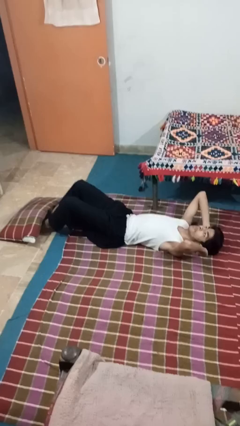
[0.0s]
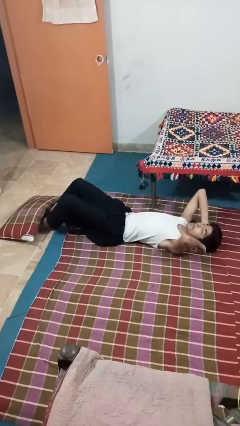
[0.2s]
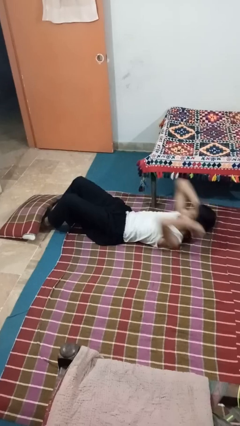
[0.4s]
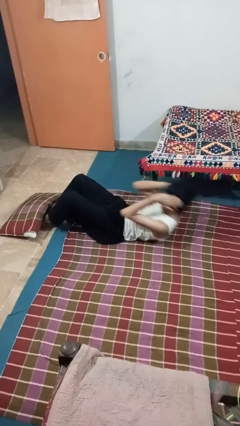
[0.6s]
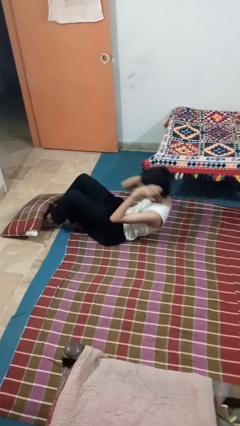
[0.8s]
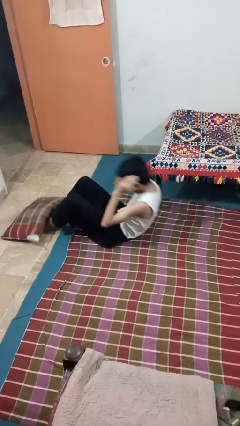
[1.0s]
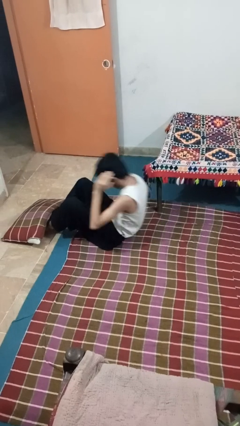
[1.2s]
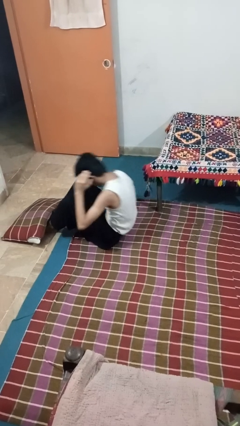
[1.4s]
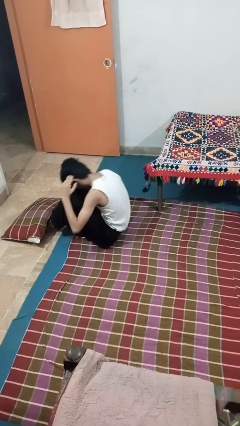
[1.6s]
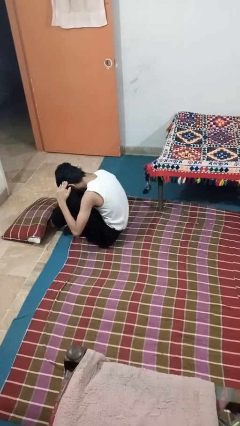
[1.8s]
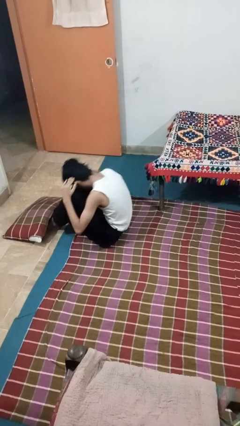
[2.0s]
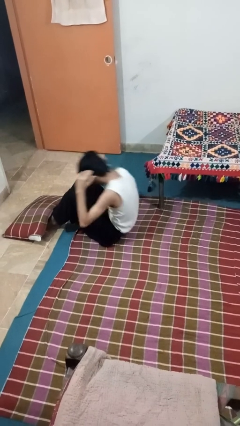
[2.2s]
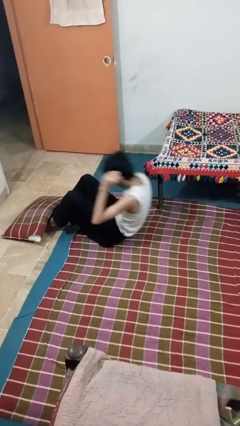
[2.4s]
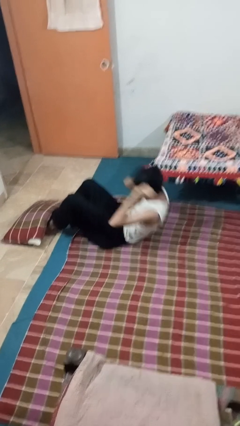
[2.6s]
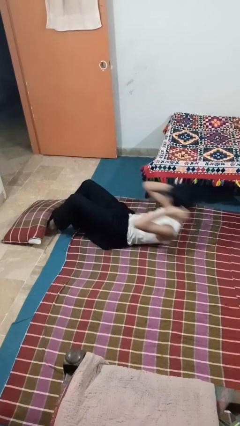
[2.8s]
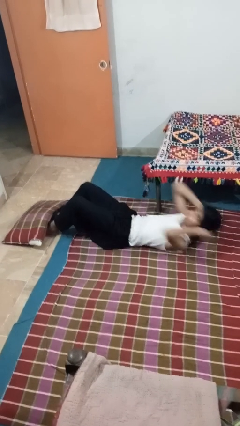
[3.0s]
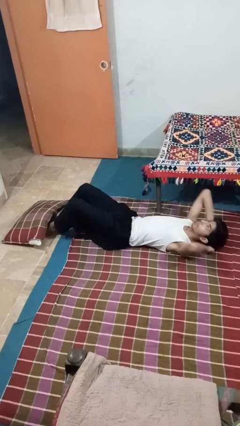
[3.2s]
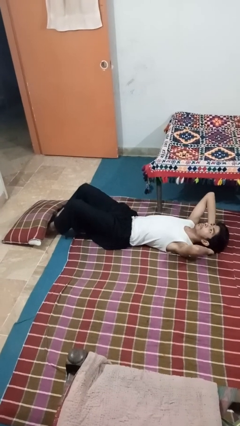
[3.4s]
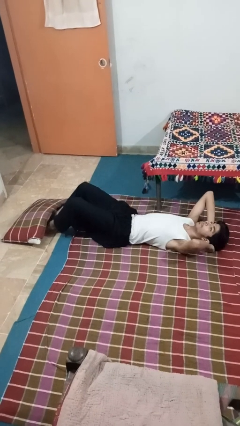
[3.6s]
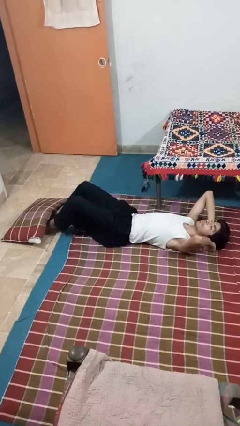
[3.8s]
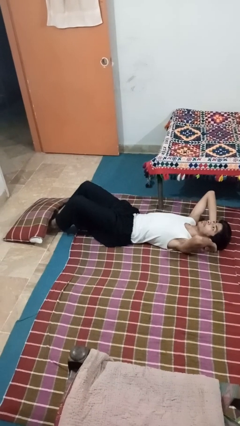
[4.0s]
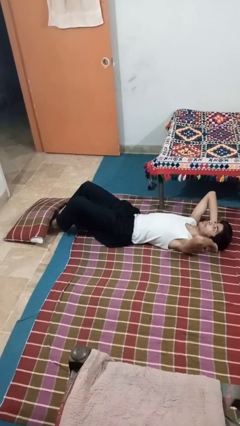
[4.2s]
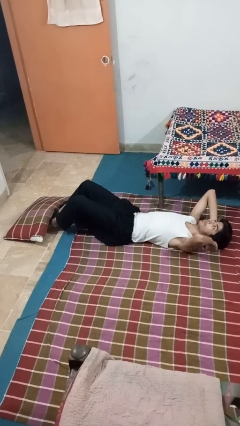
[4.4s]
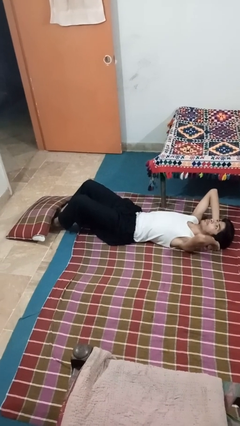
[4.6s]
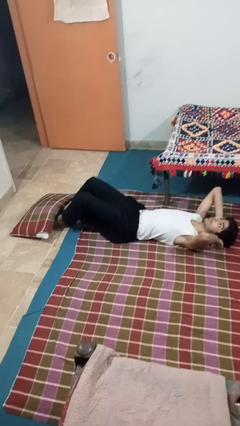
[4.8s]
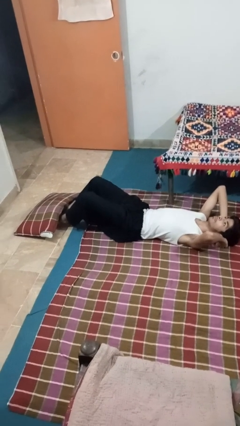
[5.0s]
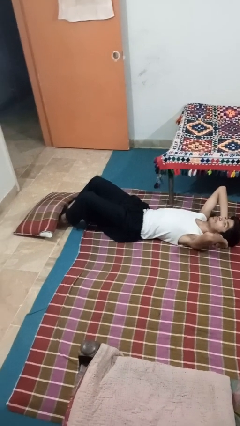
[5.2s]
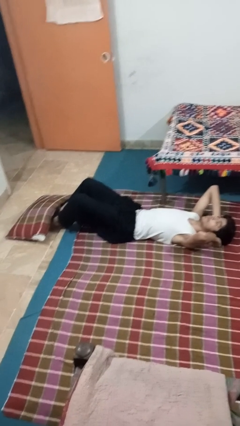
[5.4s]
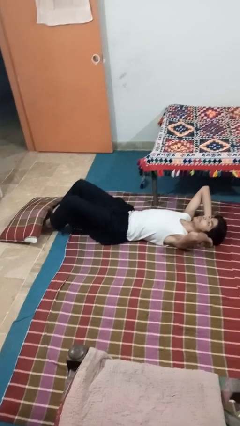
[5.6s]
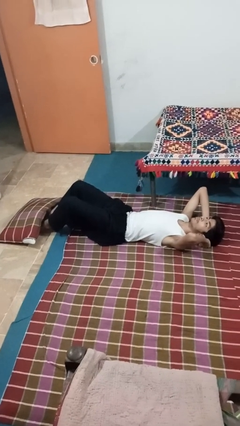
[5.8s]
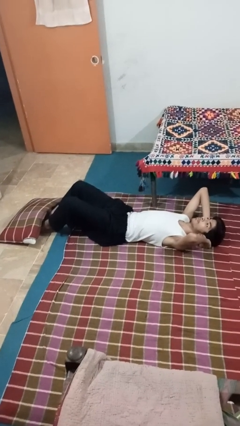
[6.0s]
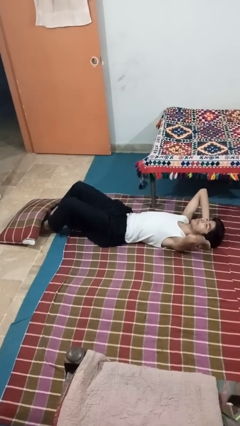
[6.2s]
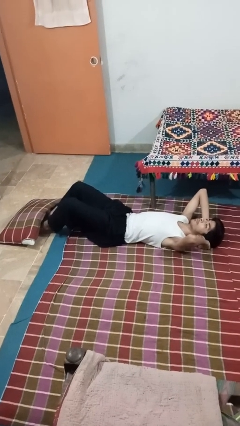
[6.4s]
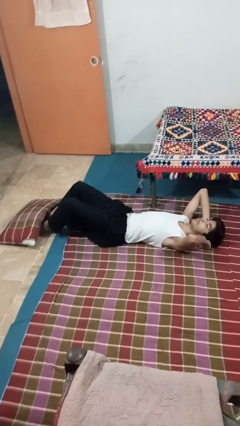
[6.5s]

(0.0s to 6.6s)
person exercises with situp

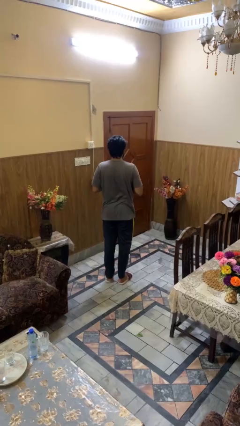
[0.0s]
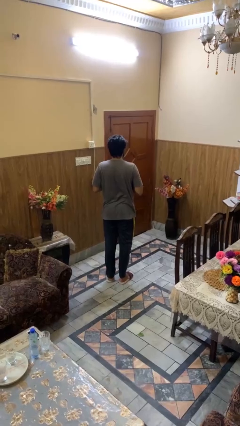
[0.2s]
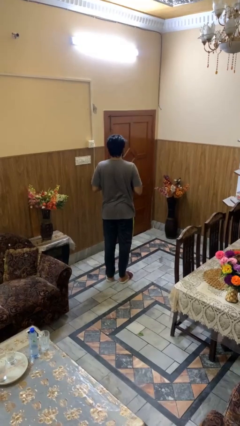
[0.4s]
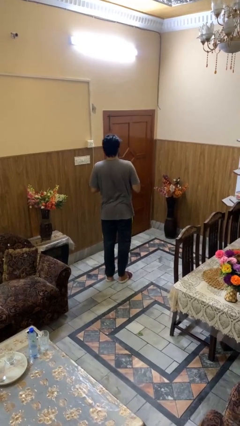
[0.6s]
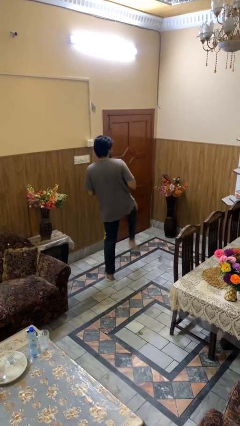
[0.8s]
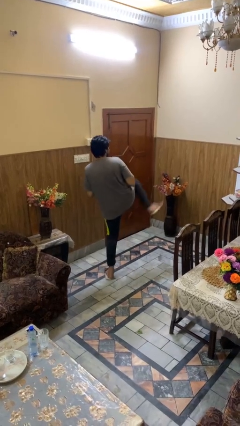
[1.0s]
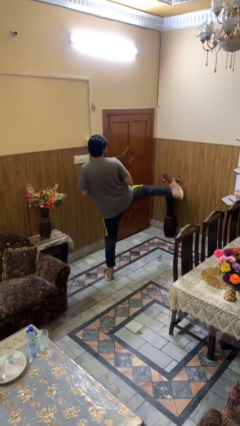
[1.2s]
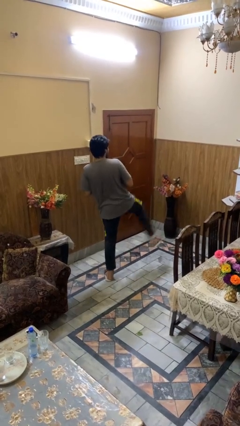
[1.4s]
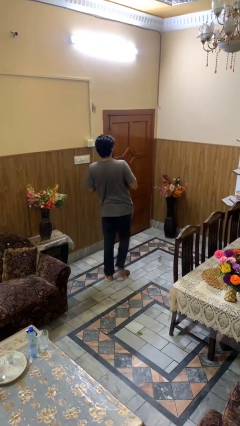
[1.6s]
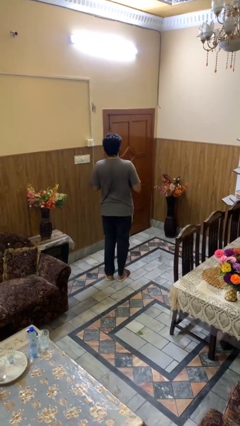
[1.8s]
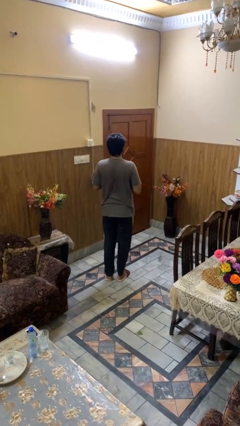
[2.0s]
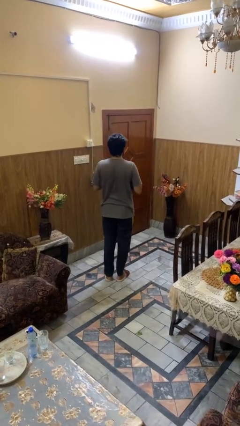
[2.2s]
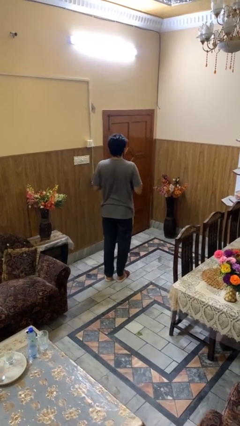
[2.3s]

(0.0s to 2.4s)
person karate kicks

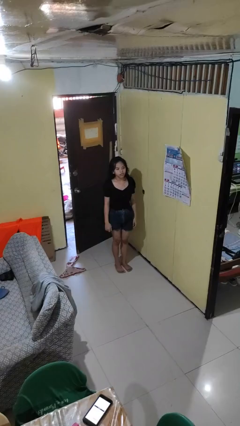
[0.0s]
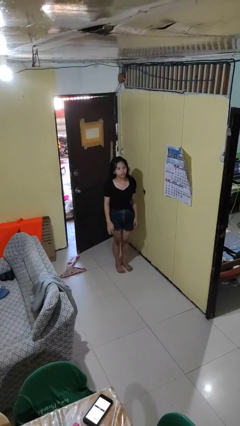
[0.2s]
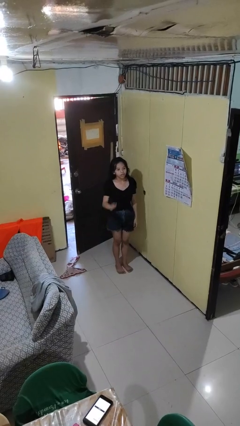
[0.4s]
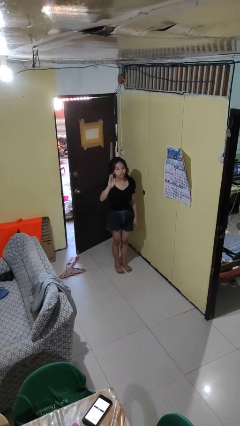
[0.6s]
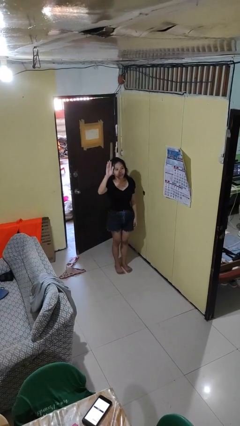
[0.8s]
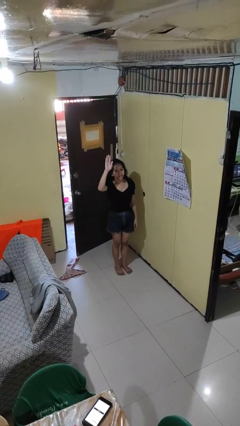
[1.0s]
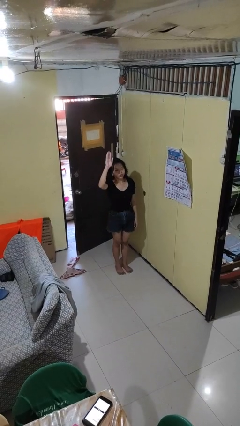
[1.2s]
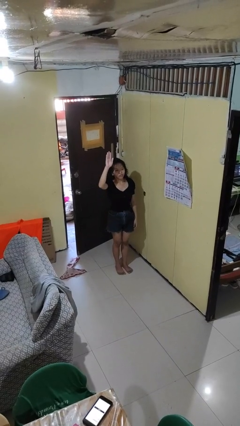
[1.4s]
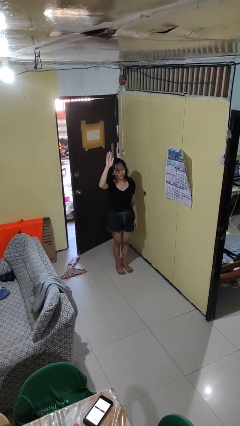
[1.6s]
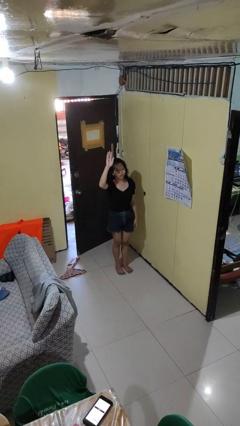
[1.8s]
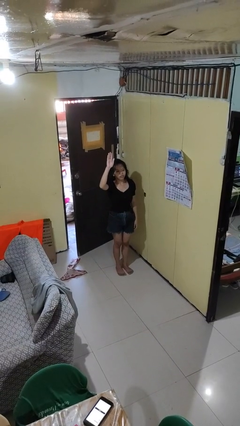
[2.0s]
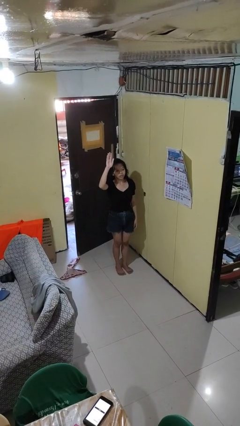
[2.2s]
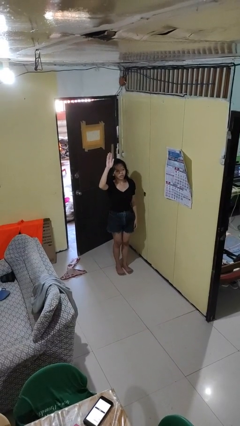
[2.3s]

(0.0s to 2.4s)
person gestures raise hand

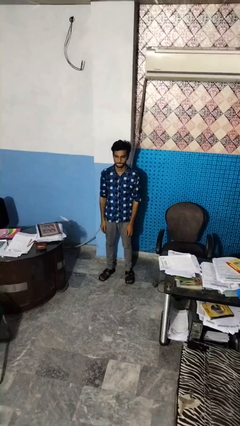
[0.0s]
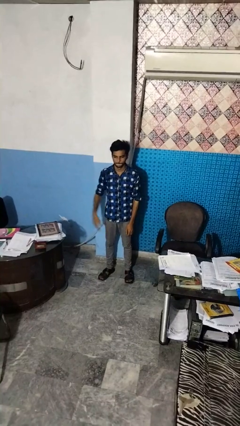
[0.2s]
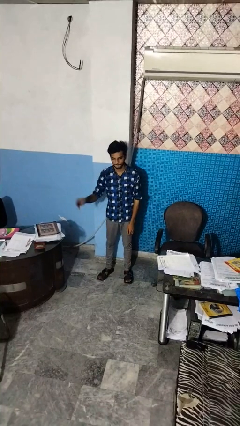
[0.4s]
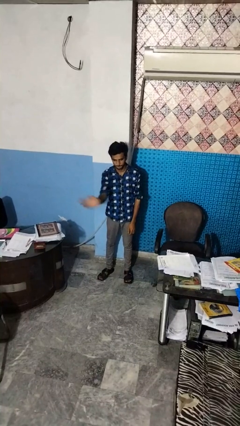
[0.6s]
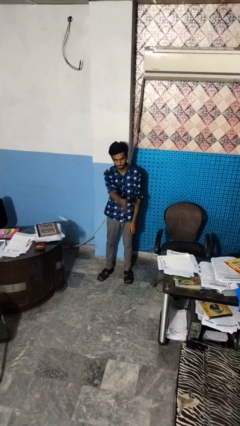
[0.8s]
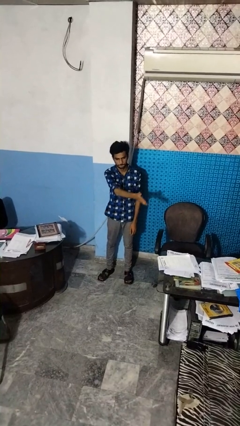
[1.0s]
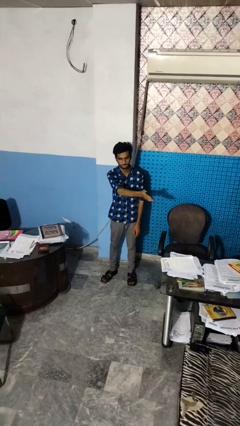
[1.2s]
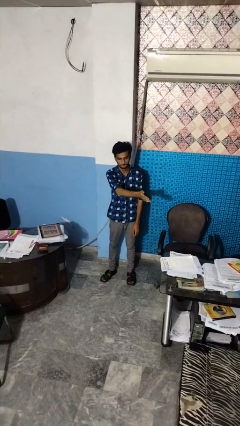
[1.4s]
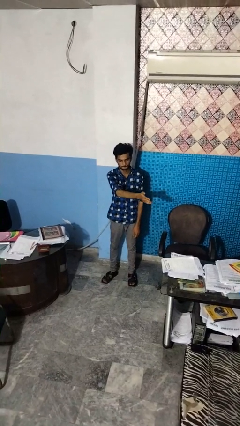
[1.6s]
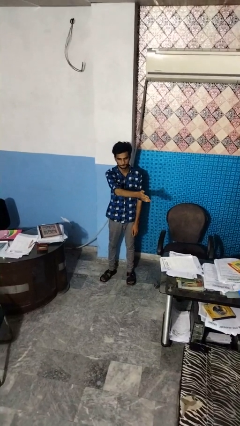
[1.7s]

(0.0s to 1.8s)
person gestures swipe left

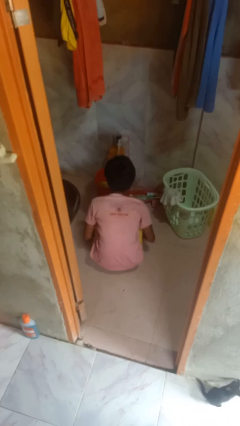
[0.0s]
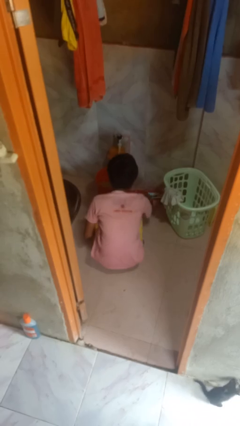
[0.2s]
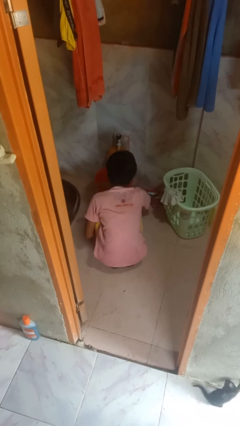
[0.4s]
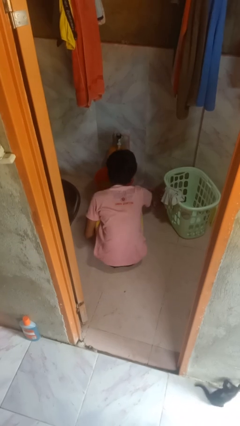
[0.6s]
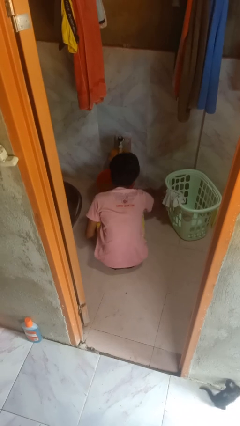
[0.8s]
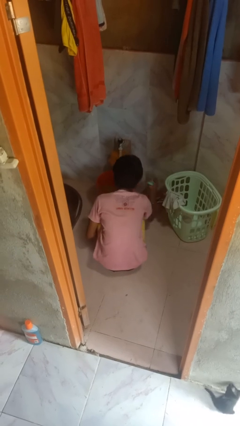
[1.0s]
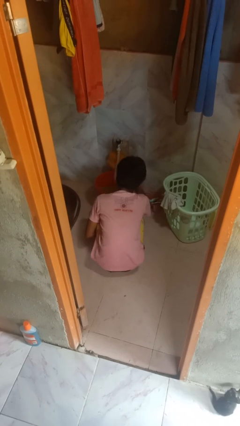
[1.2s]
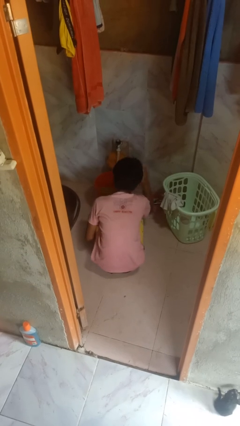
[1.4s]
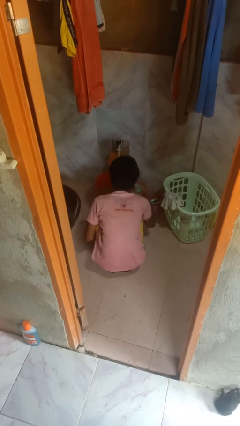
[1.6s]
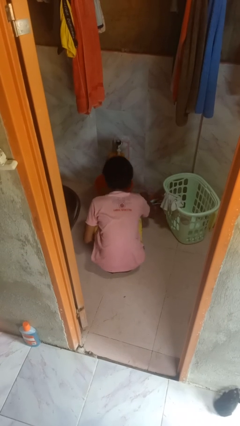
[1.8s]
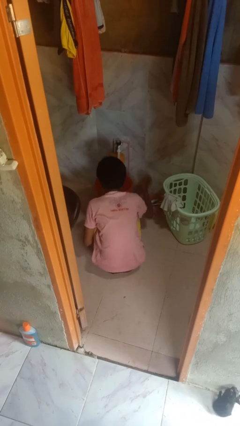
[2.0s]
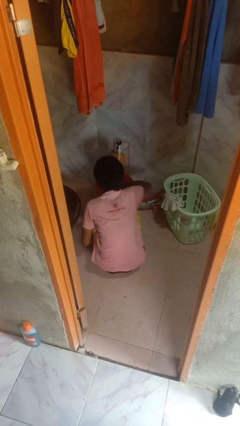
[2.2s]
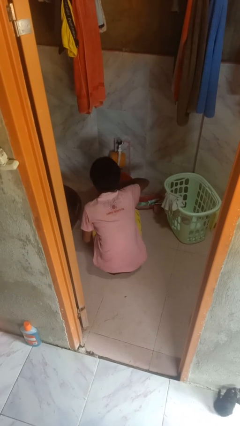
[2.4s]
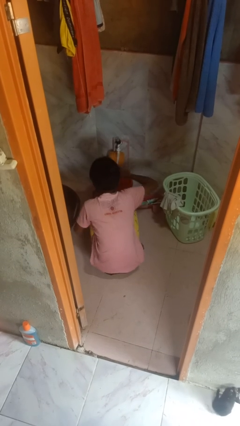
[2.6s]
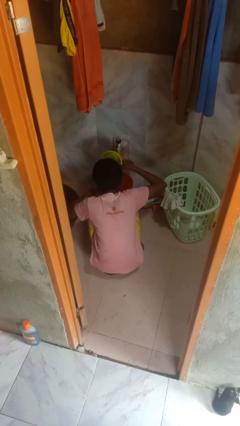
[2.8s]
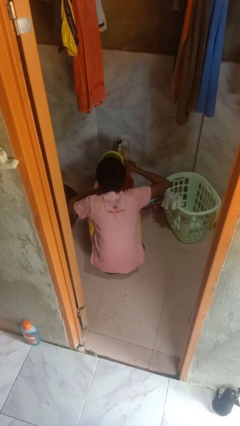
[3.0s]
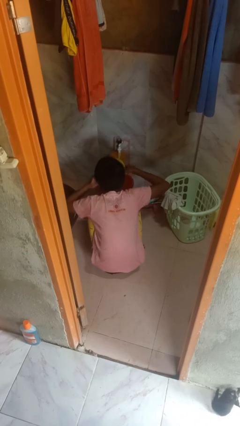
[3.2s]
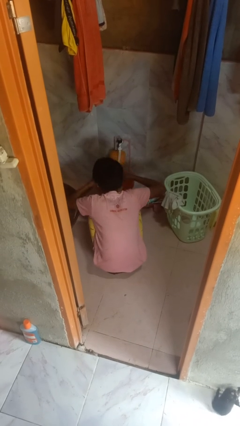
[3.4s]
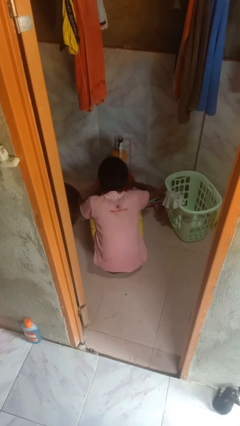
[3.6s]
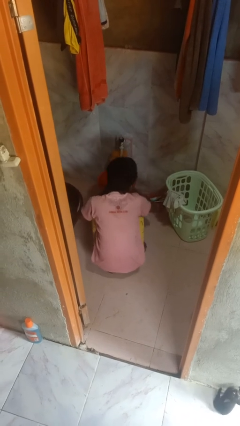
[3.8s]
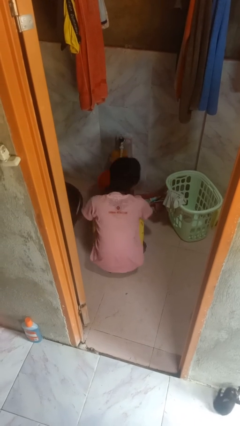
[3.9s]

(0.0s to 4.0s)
person washes face

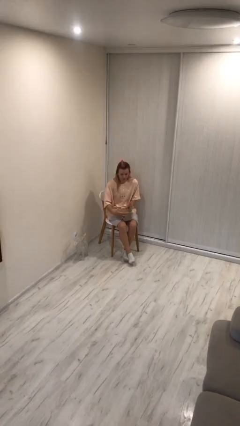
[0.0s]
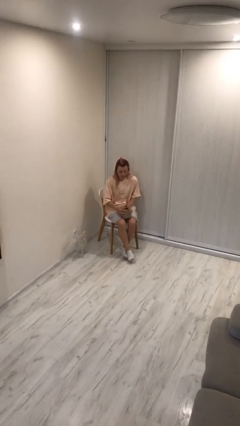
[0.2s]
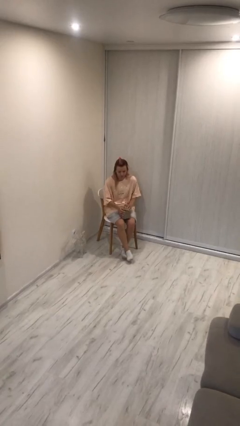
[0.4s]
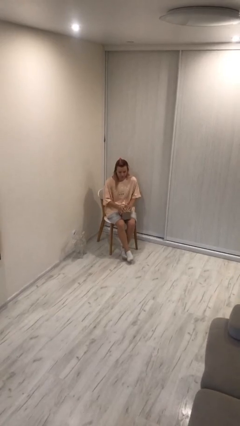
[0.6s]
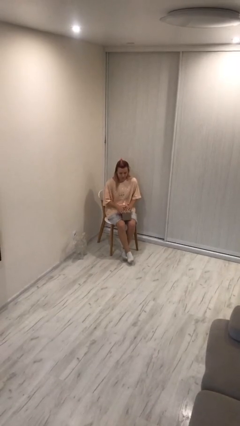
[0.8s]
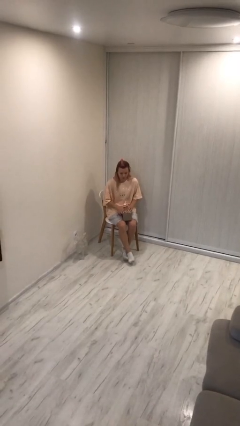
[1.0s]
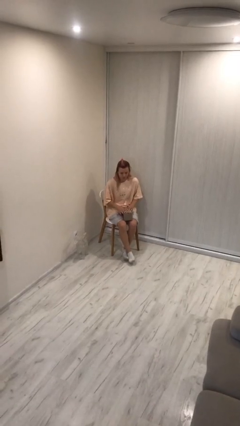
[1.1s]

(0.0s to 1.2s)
person closes box
